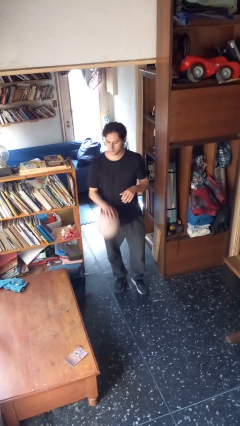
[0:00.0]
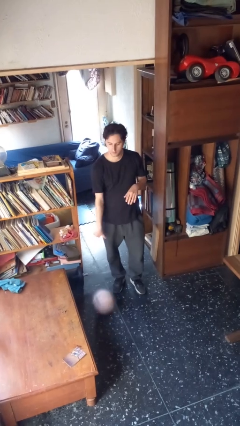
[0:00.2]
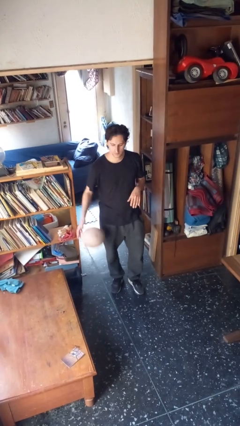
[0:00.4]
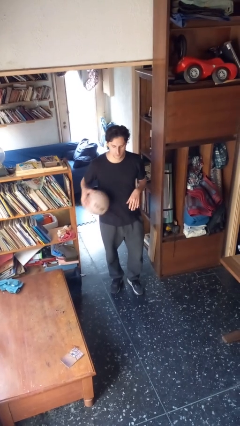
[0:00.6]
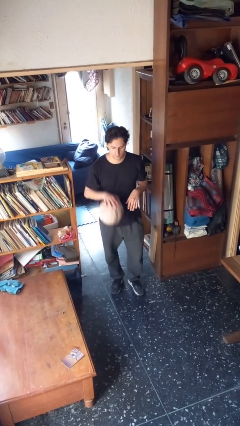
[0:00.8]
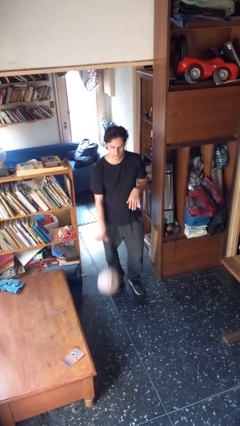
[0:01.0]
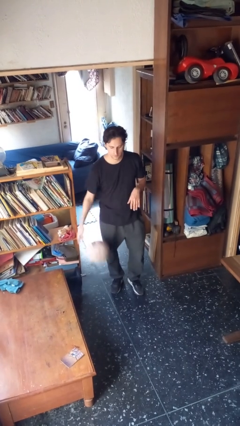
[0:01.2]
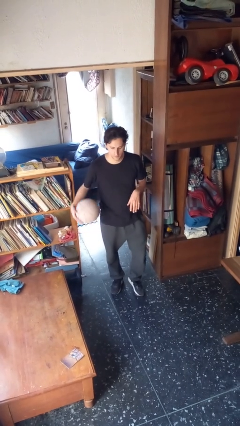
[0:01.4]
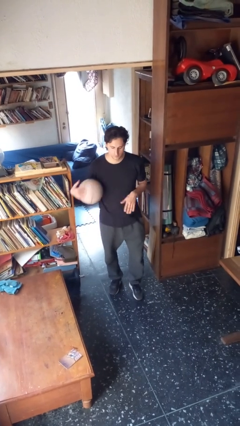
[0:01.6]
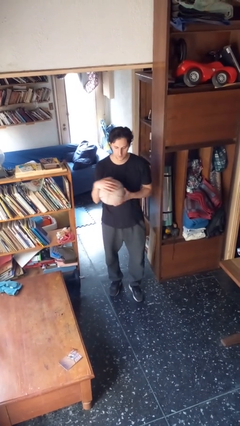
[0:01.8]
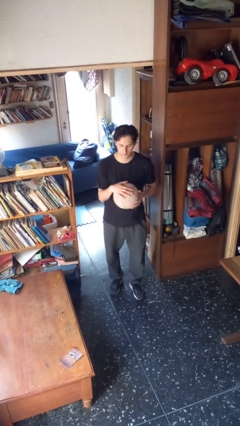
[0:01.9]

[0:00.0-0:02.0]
person bounces ball on floor

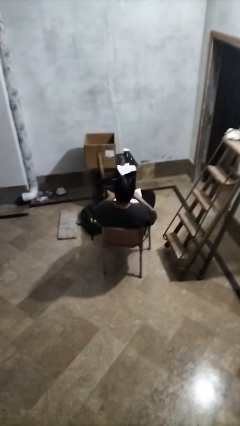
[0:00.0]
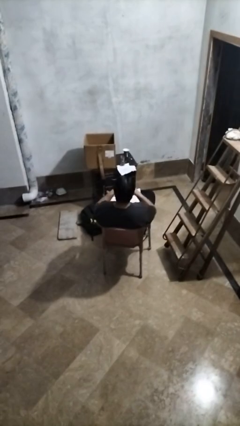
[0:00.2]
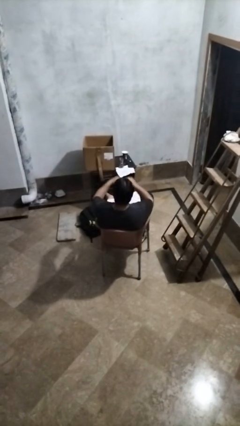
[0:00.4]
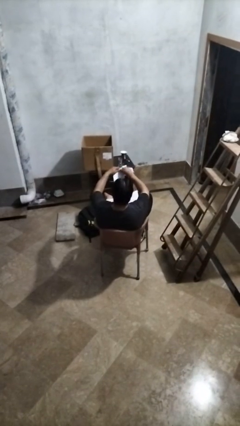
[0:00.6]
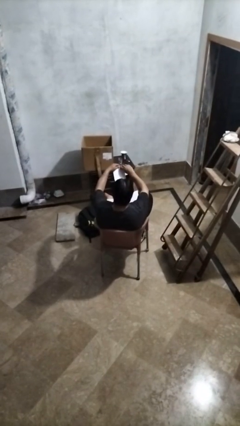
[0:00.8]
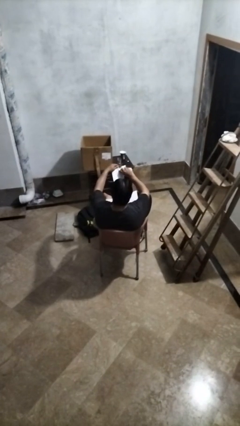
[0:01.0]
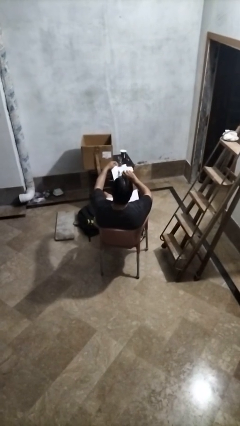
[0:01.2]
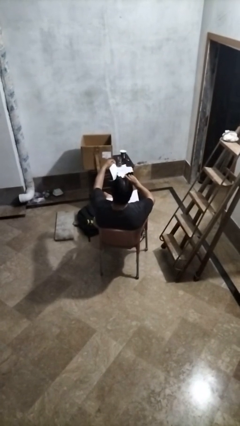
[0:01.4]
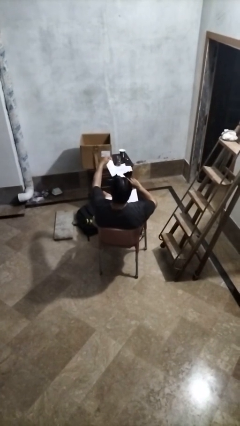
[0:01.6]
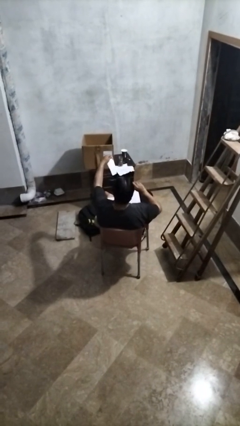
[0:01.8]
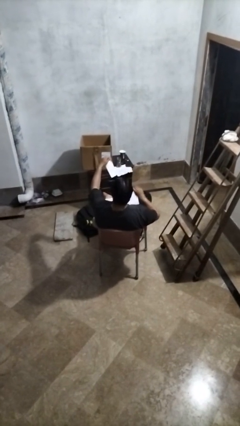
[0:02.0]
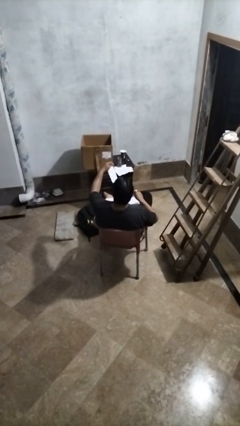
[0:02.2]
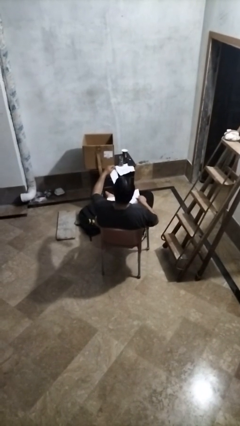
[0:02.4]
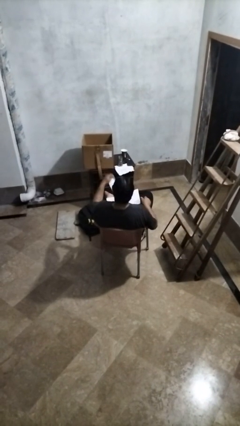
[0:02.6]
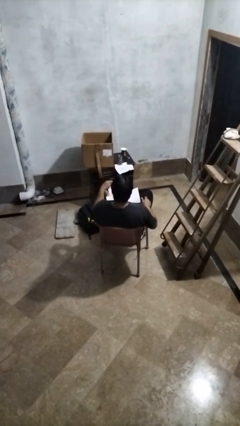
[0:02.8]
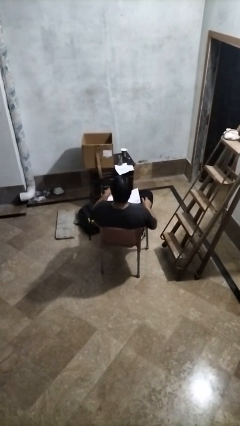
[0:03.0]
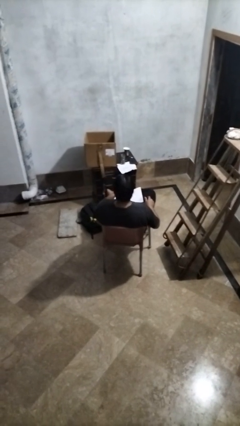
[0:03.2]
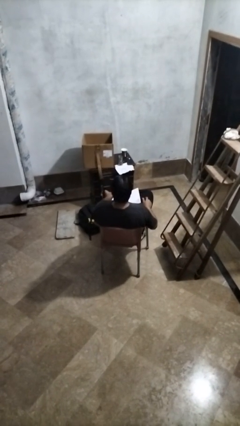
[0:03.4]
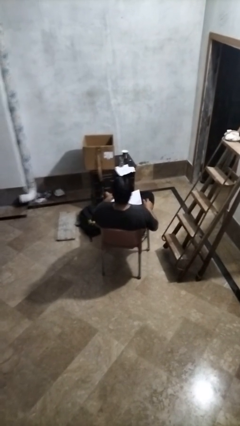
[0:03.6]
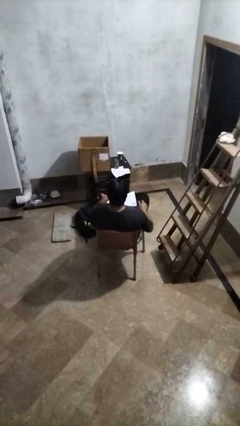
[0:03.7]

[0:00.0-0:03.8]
person tears paper

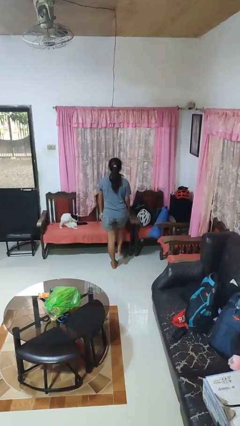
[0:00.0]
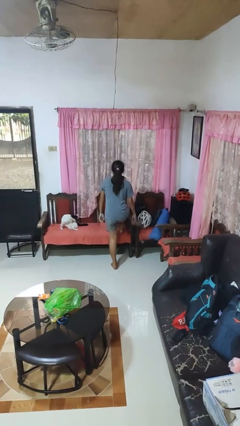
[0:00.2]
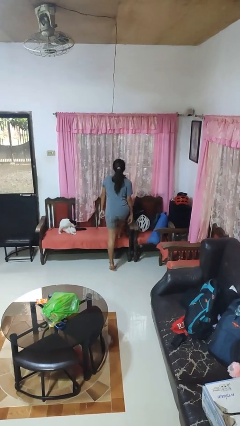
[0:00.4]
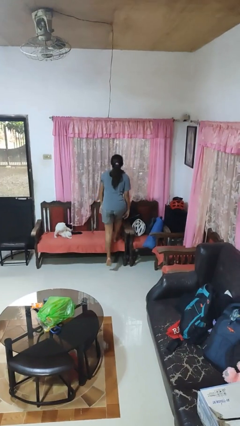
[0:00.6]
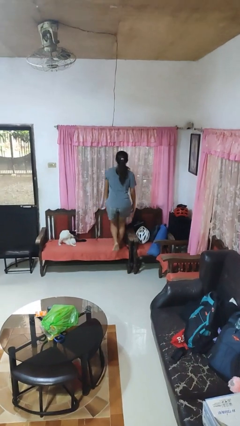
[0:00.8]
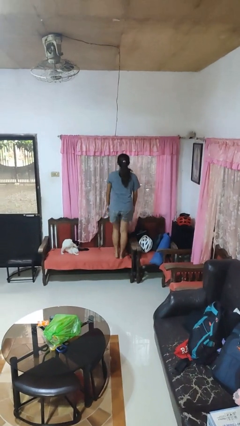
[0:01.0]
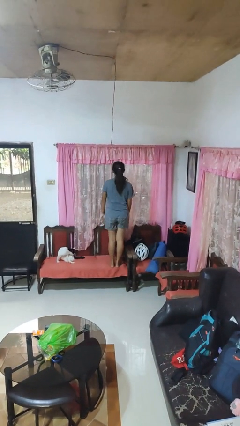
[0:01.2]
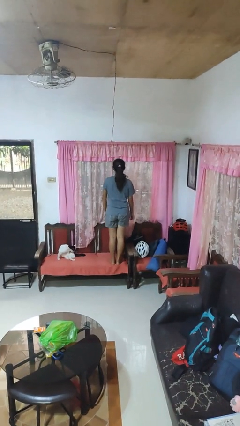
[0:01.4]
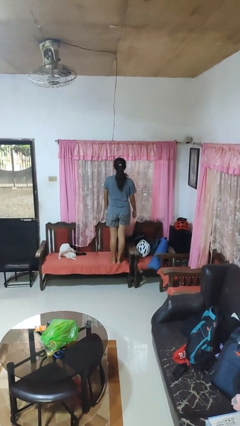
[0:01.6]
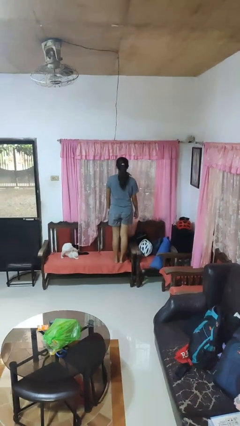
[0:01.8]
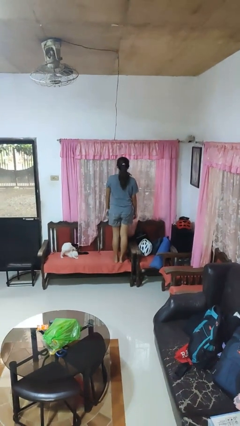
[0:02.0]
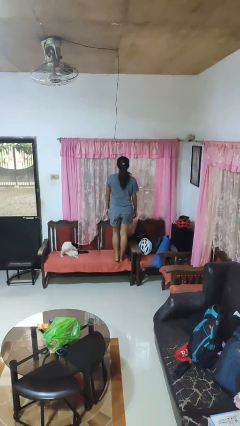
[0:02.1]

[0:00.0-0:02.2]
person climbs on chair

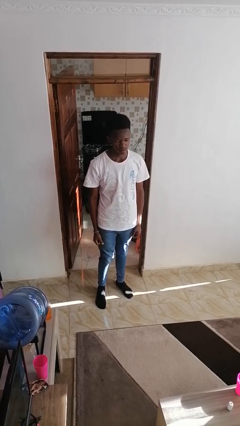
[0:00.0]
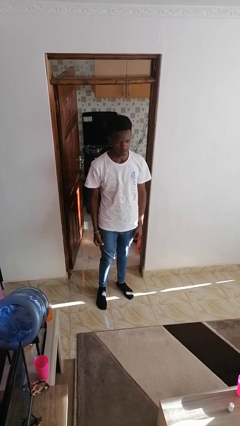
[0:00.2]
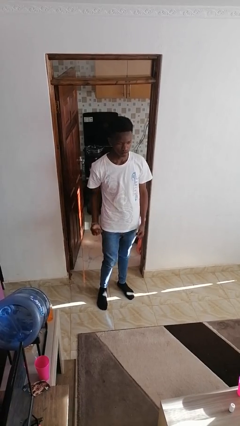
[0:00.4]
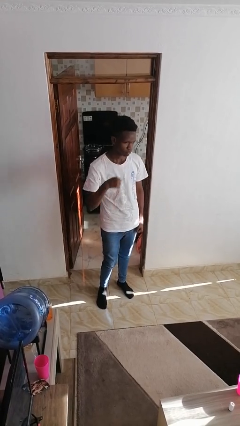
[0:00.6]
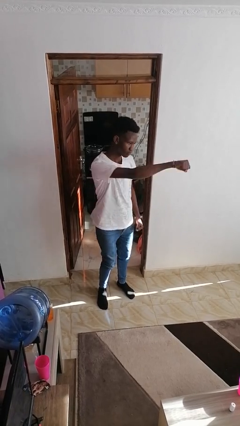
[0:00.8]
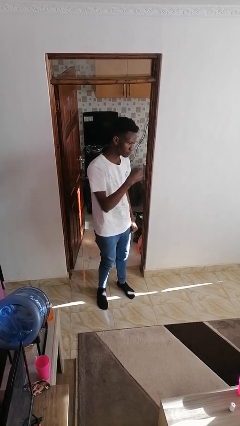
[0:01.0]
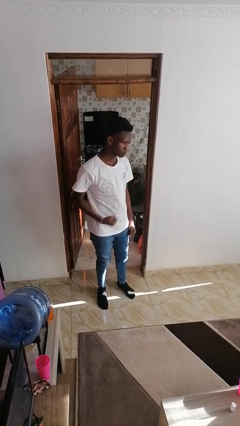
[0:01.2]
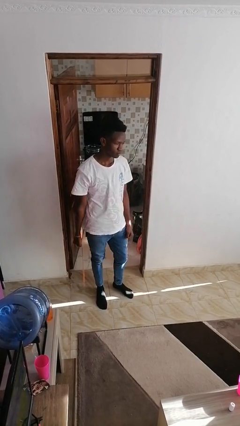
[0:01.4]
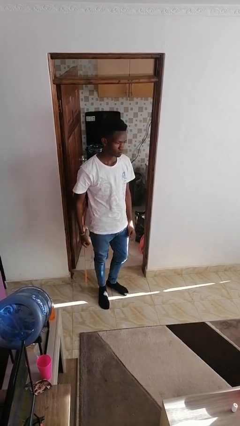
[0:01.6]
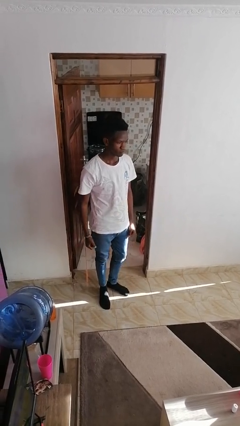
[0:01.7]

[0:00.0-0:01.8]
person punches

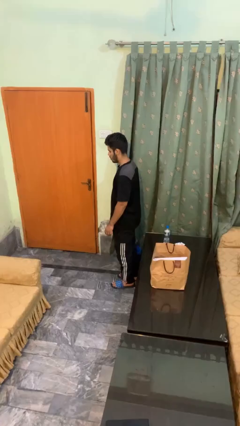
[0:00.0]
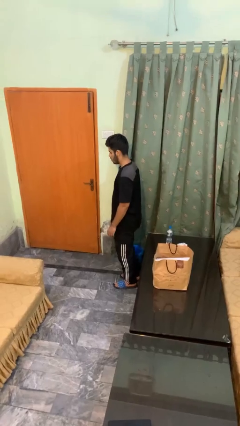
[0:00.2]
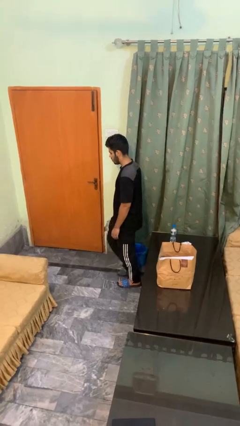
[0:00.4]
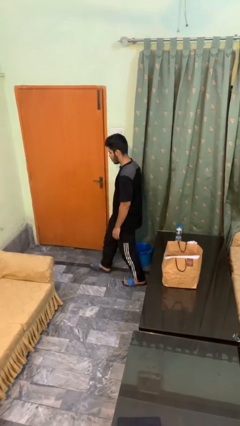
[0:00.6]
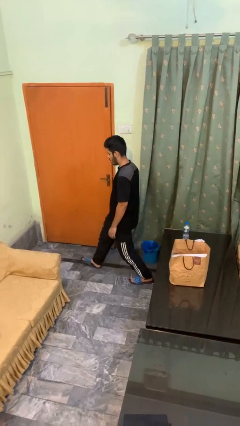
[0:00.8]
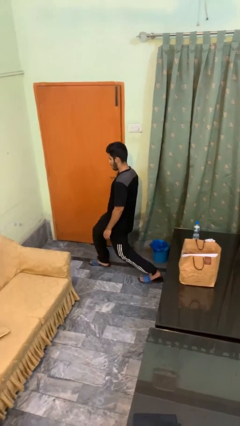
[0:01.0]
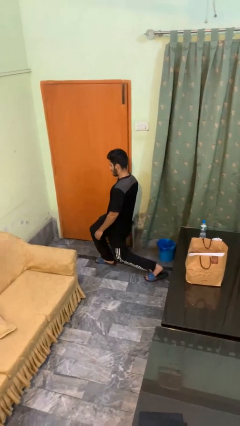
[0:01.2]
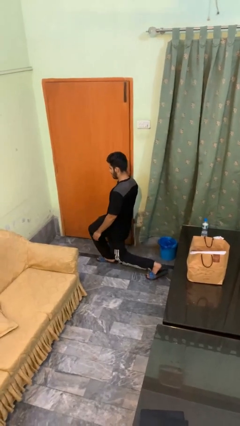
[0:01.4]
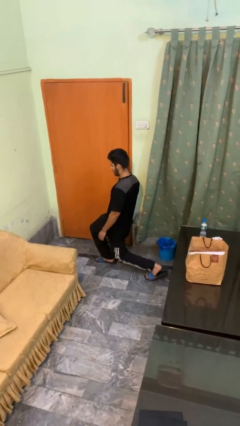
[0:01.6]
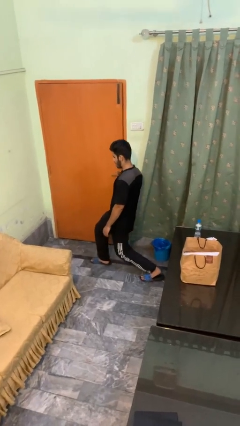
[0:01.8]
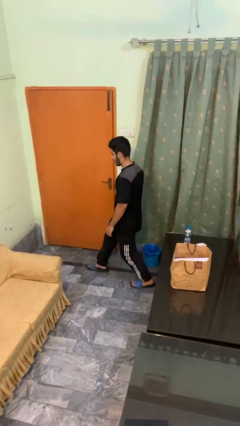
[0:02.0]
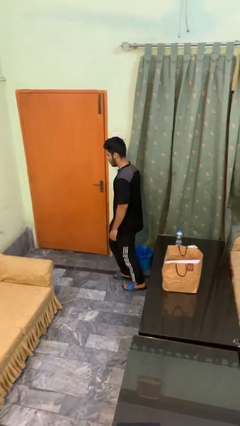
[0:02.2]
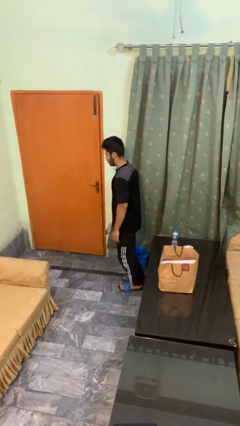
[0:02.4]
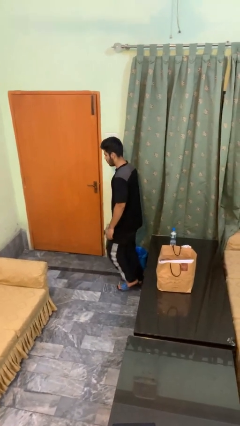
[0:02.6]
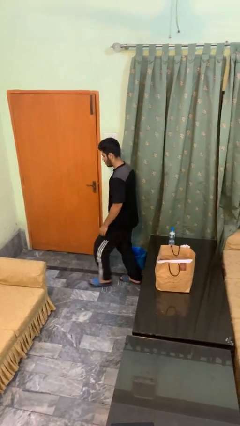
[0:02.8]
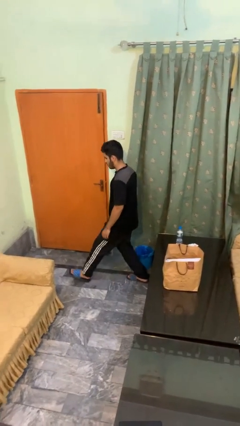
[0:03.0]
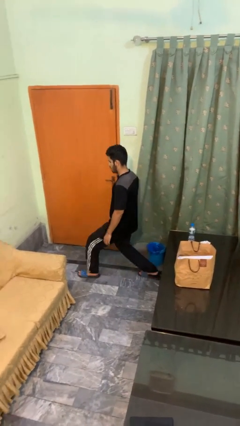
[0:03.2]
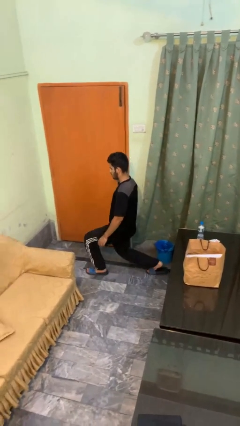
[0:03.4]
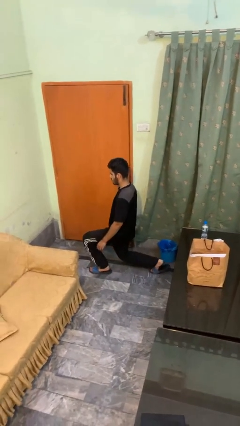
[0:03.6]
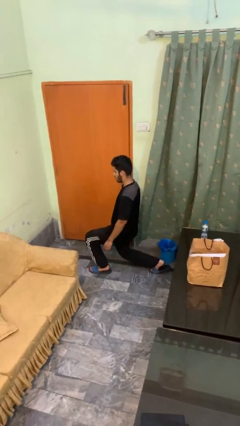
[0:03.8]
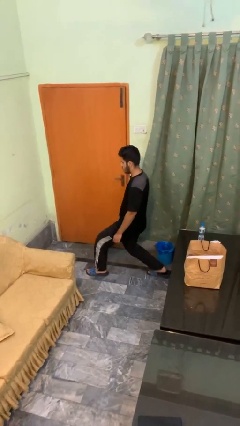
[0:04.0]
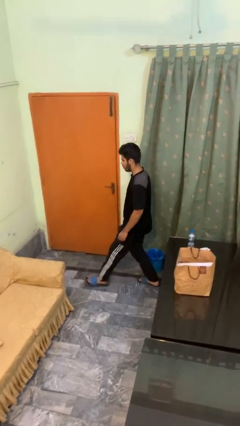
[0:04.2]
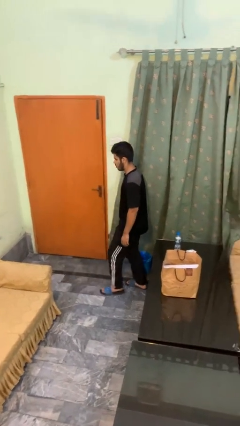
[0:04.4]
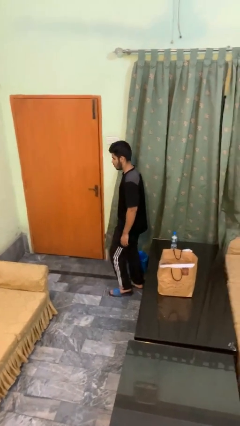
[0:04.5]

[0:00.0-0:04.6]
person exercises with lunges

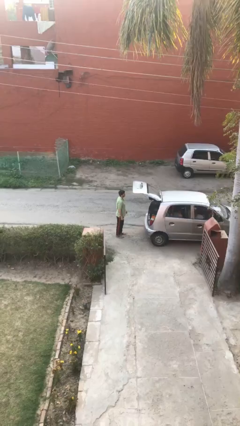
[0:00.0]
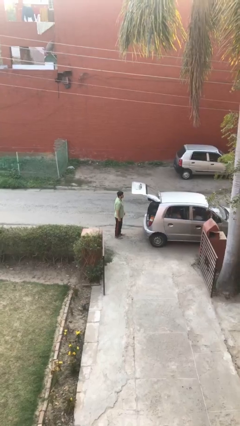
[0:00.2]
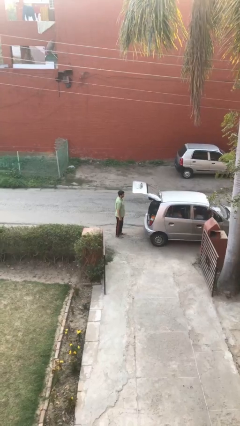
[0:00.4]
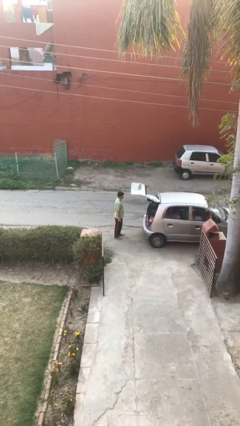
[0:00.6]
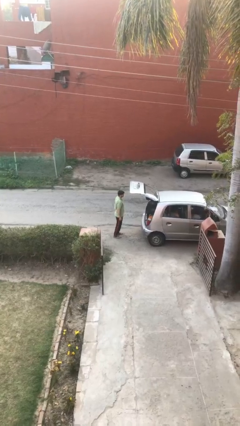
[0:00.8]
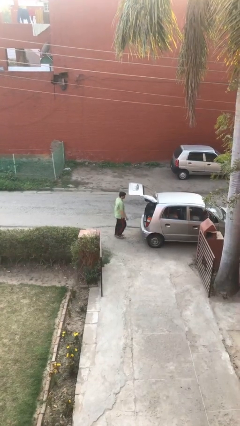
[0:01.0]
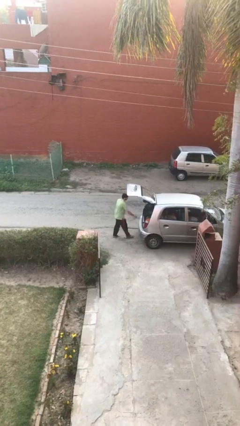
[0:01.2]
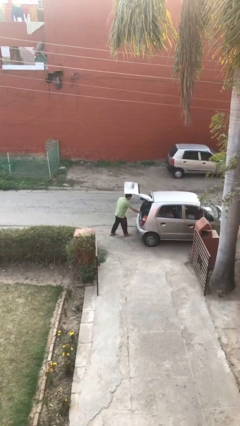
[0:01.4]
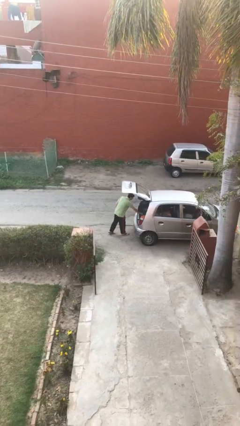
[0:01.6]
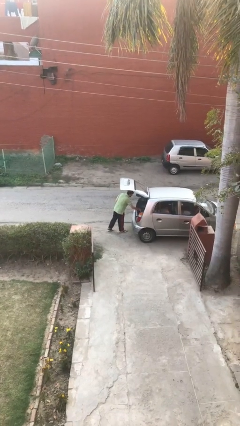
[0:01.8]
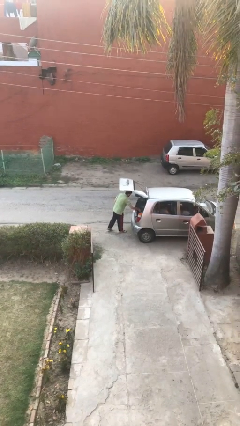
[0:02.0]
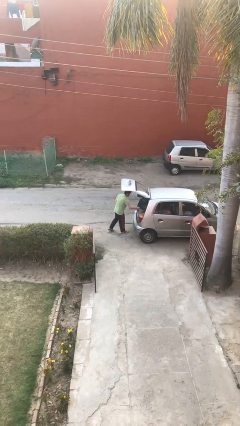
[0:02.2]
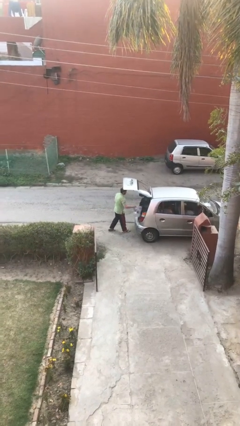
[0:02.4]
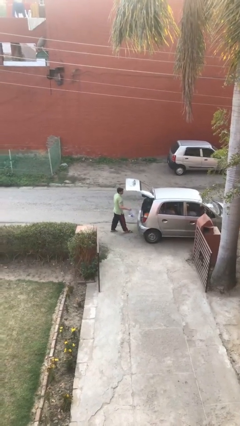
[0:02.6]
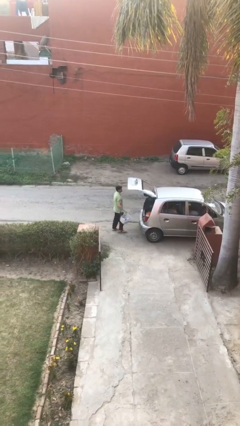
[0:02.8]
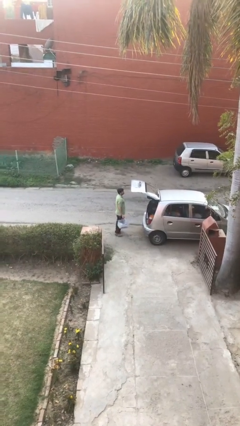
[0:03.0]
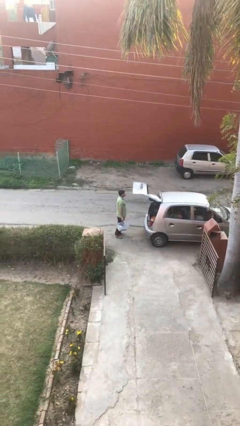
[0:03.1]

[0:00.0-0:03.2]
person unloads car
